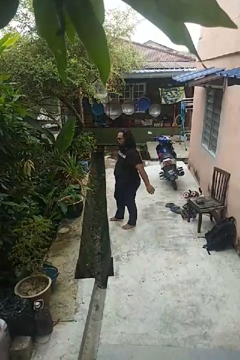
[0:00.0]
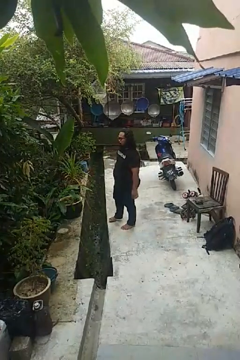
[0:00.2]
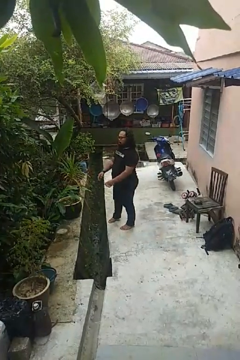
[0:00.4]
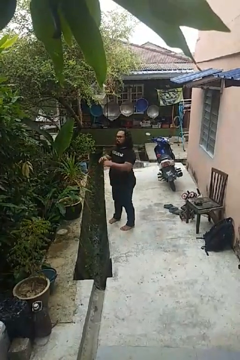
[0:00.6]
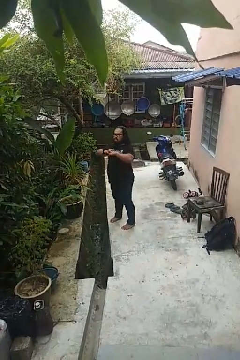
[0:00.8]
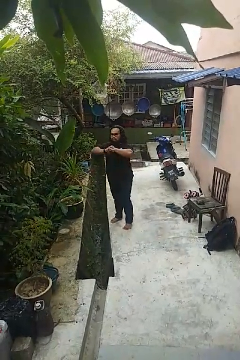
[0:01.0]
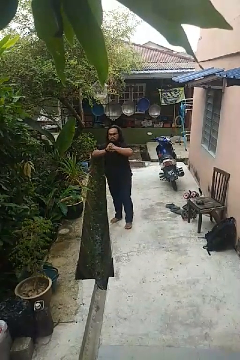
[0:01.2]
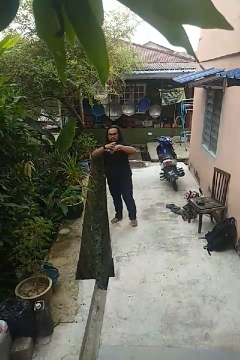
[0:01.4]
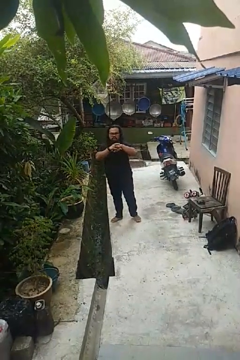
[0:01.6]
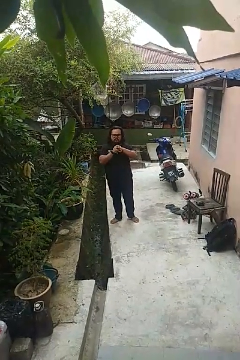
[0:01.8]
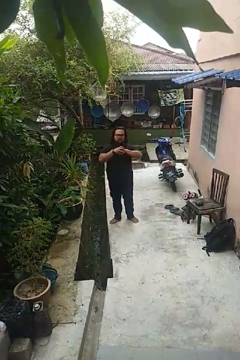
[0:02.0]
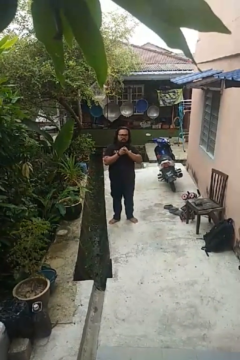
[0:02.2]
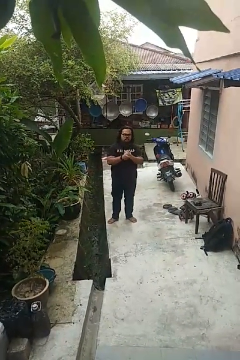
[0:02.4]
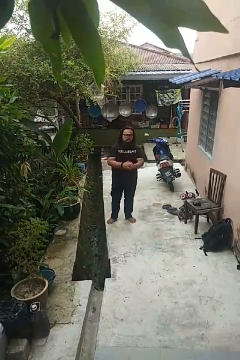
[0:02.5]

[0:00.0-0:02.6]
person cracks knuckles

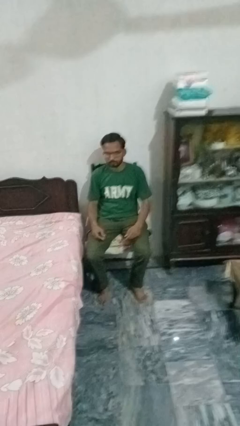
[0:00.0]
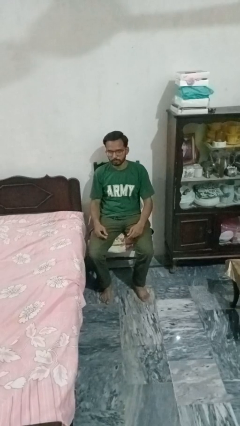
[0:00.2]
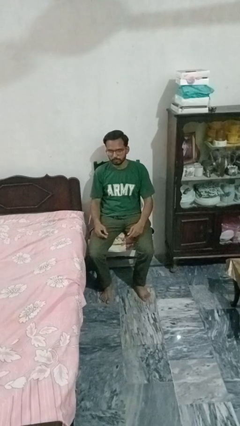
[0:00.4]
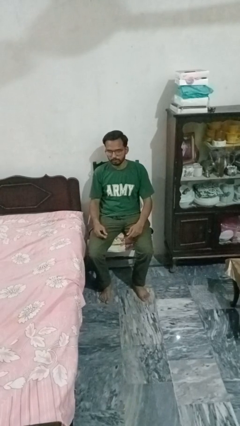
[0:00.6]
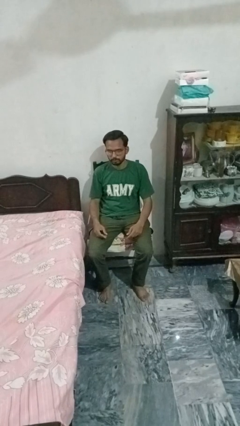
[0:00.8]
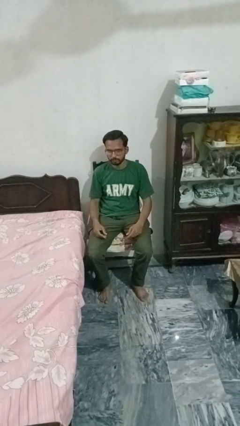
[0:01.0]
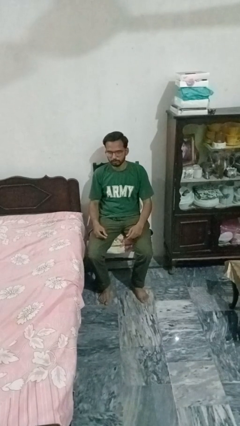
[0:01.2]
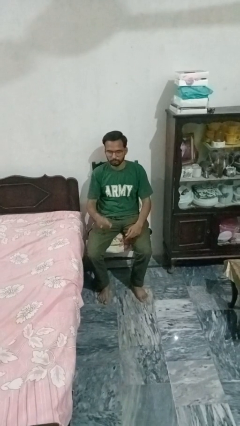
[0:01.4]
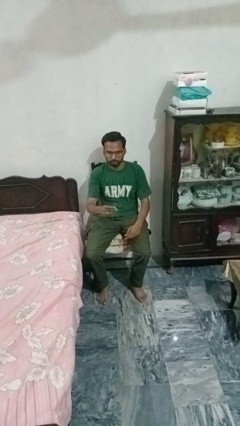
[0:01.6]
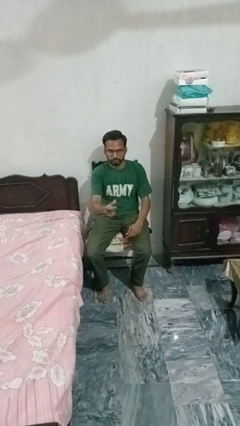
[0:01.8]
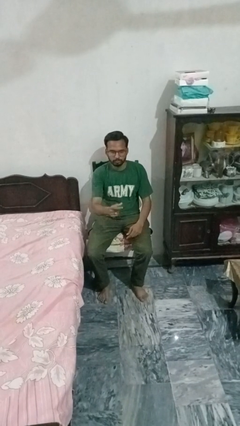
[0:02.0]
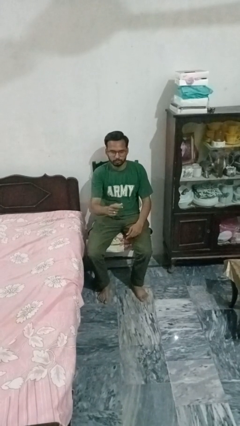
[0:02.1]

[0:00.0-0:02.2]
person snaps fingers

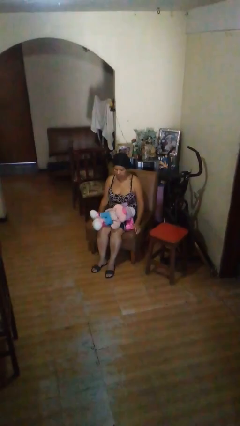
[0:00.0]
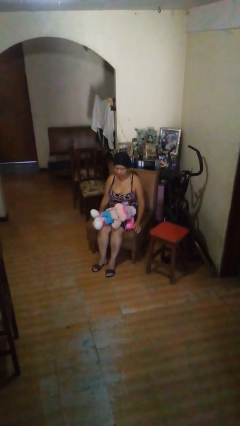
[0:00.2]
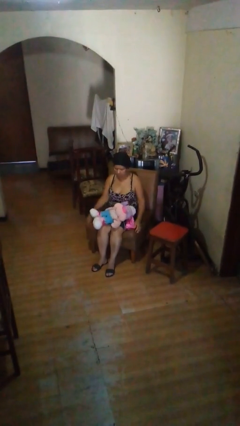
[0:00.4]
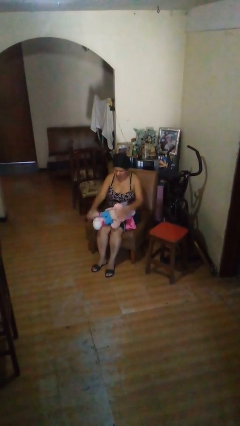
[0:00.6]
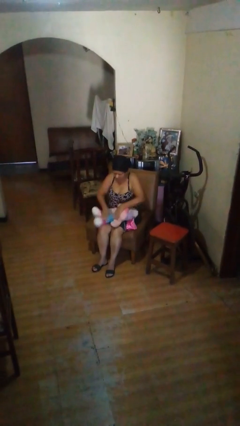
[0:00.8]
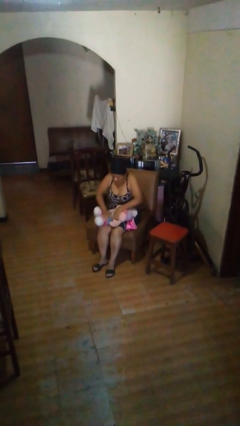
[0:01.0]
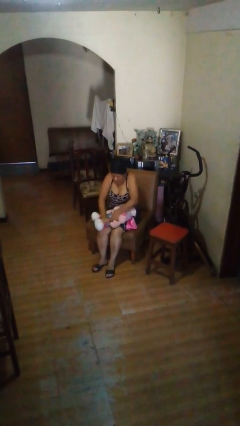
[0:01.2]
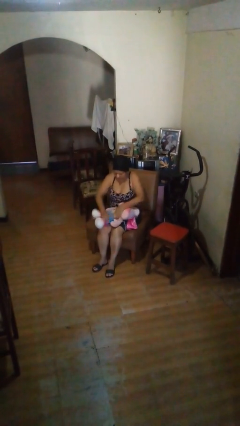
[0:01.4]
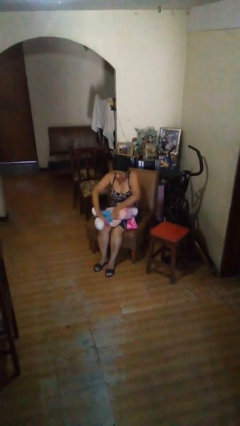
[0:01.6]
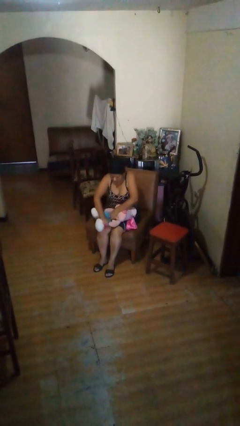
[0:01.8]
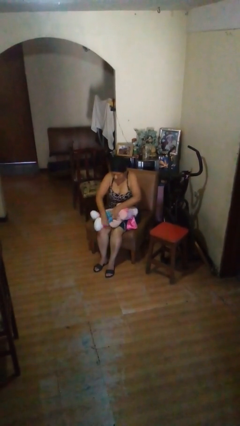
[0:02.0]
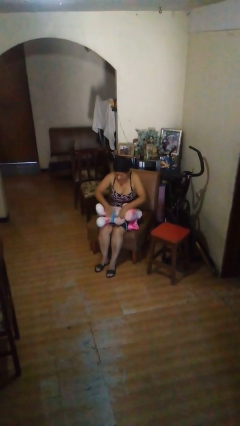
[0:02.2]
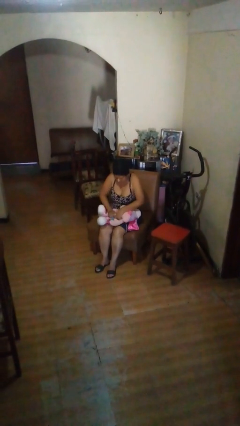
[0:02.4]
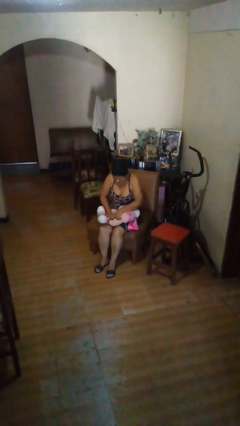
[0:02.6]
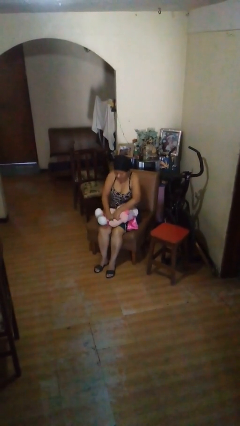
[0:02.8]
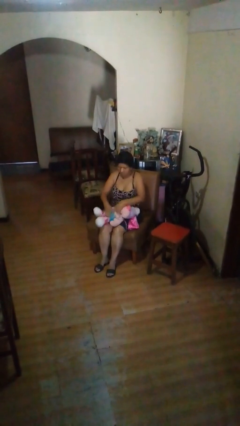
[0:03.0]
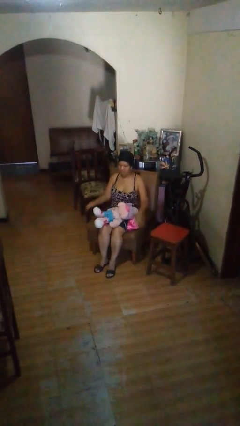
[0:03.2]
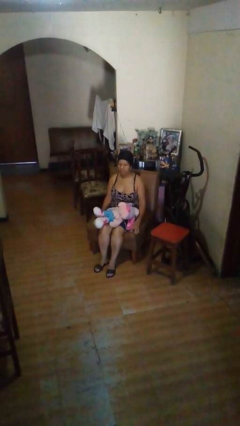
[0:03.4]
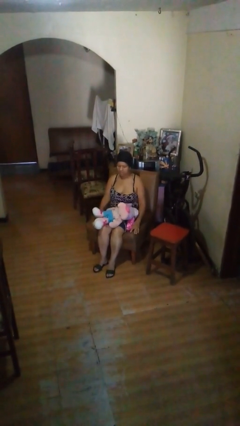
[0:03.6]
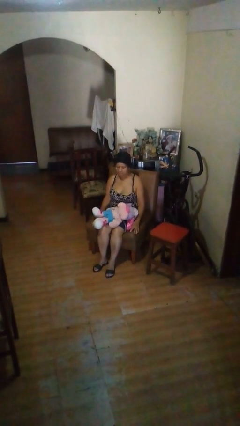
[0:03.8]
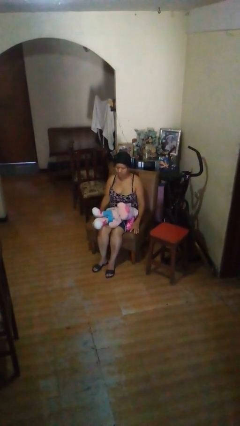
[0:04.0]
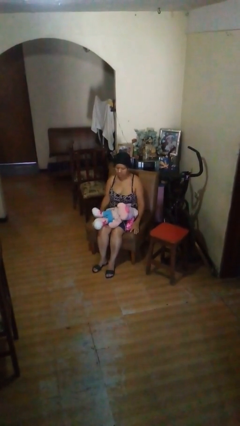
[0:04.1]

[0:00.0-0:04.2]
person squeezes object

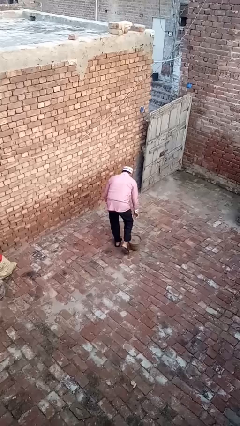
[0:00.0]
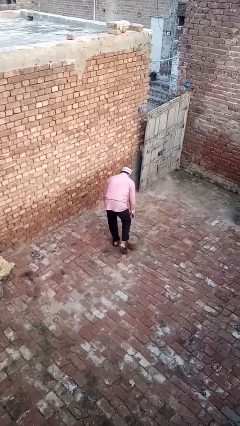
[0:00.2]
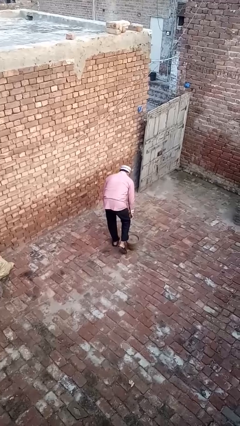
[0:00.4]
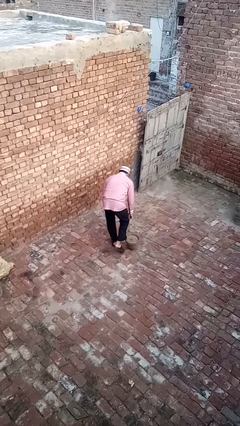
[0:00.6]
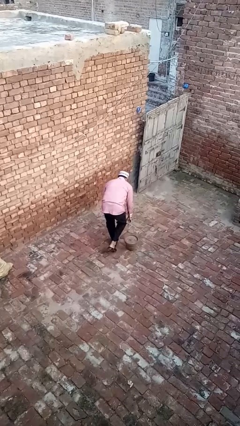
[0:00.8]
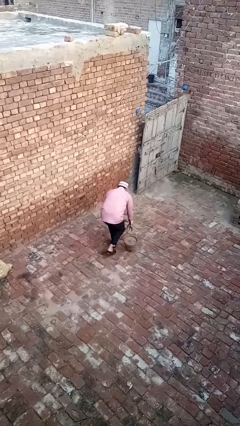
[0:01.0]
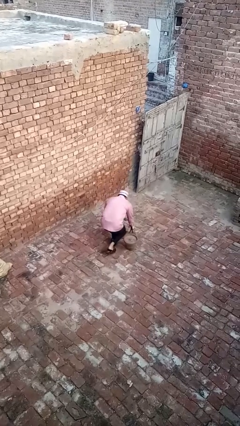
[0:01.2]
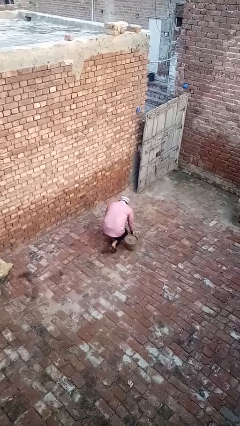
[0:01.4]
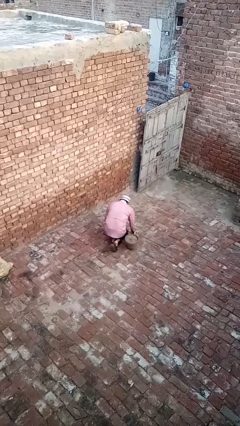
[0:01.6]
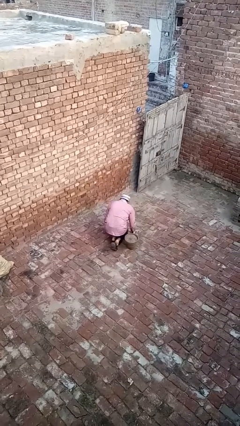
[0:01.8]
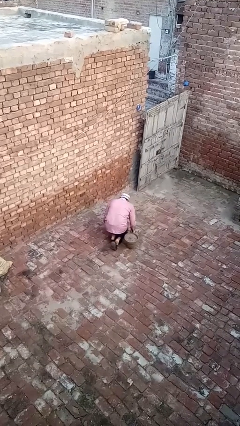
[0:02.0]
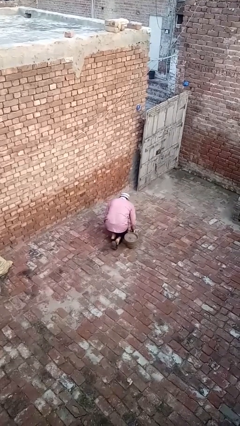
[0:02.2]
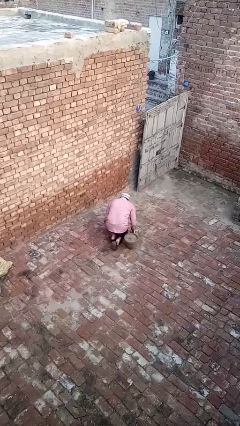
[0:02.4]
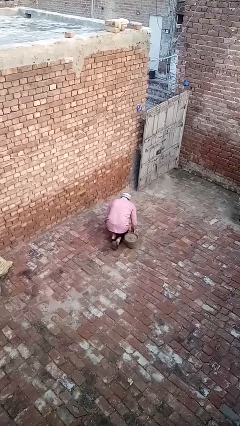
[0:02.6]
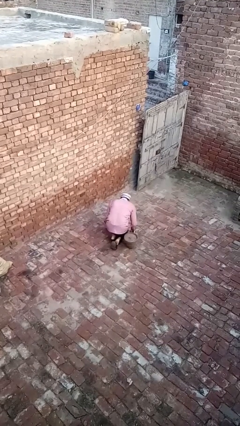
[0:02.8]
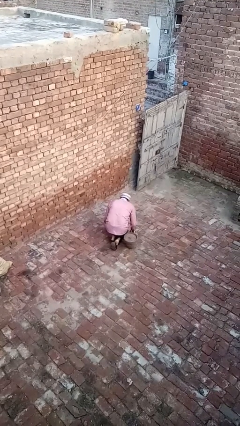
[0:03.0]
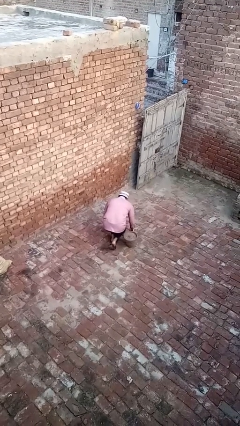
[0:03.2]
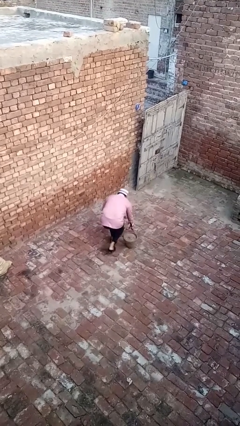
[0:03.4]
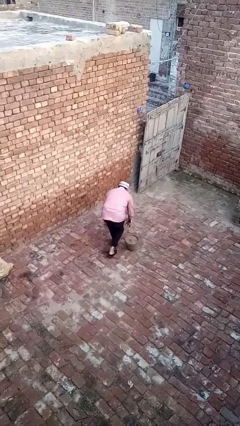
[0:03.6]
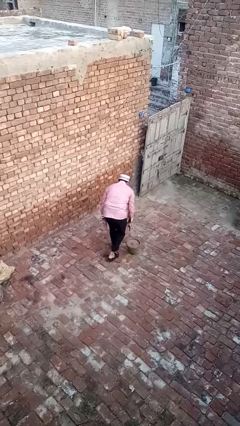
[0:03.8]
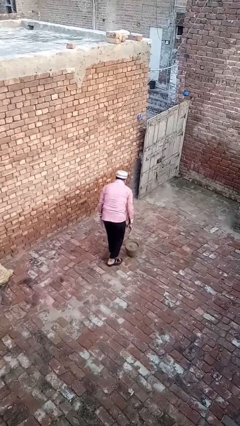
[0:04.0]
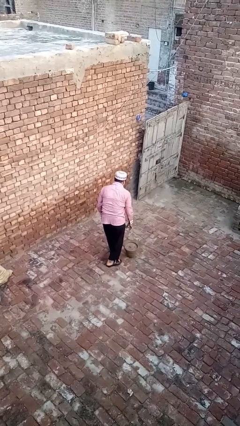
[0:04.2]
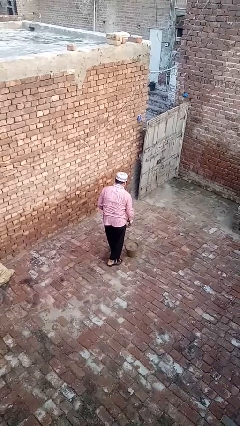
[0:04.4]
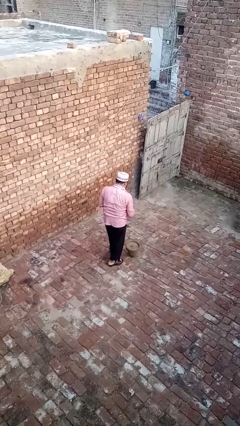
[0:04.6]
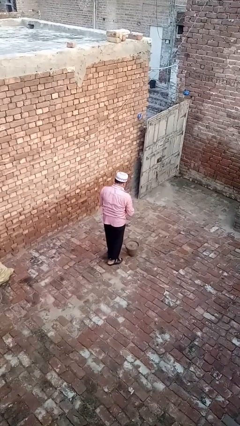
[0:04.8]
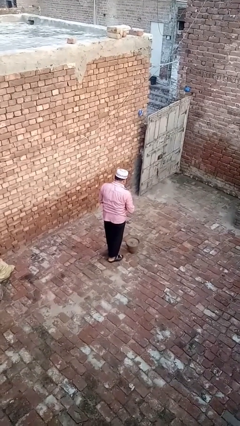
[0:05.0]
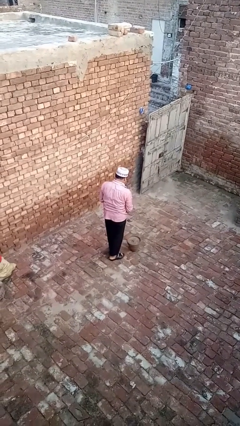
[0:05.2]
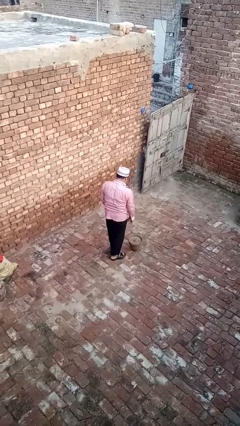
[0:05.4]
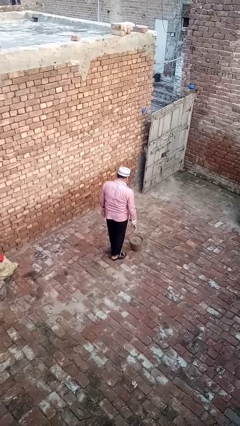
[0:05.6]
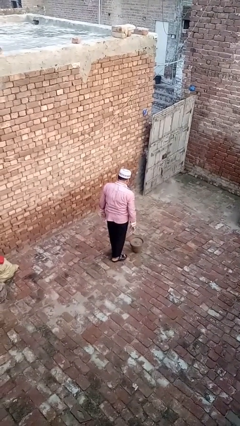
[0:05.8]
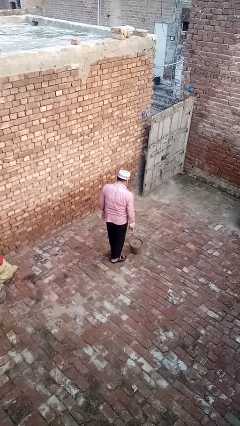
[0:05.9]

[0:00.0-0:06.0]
person lies down on floor

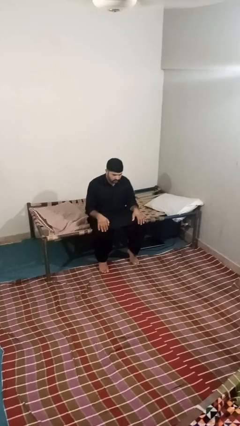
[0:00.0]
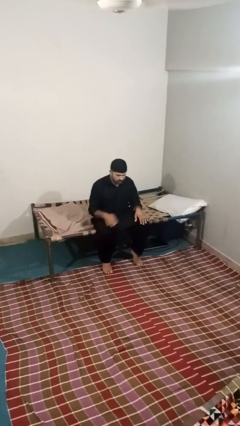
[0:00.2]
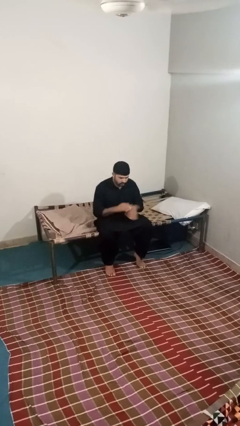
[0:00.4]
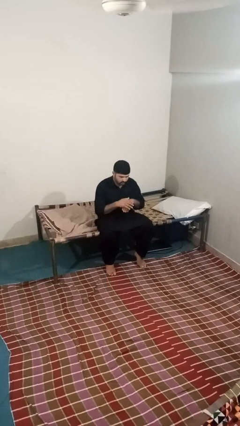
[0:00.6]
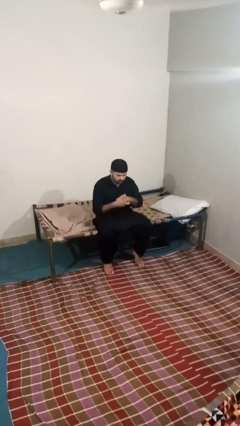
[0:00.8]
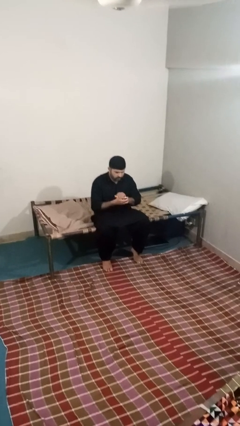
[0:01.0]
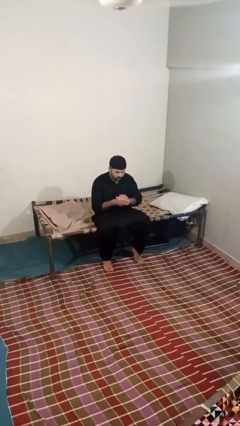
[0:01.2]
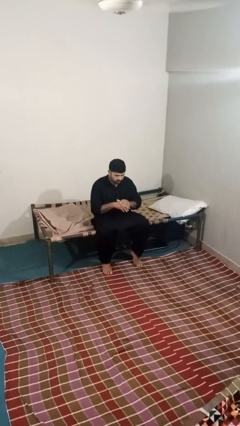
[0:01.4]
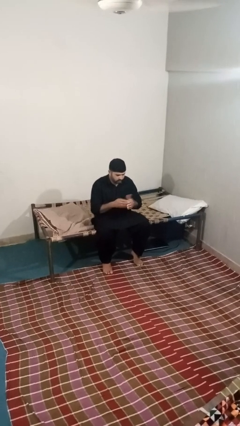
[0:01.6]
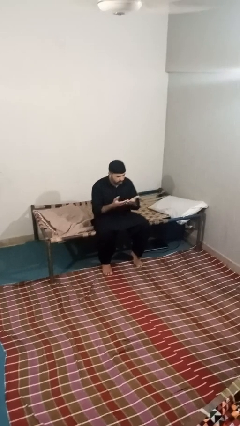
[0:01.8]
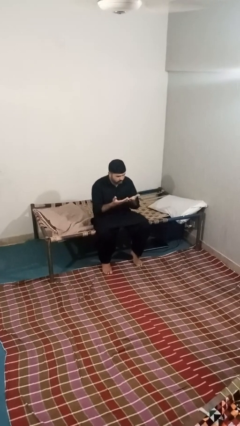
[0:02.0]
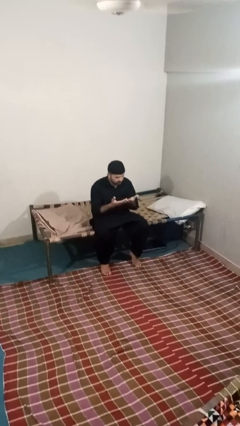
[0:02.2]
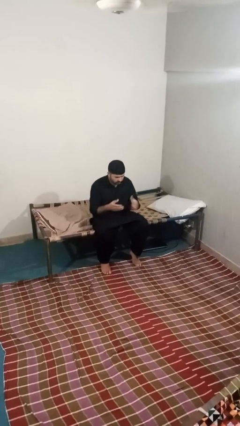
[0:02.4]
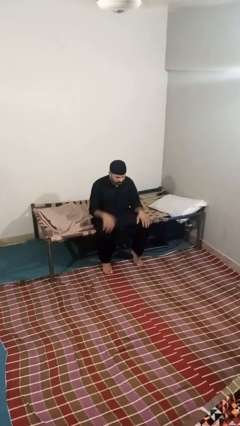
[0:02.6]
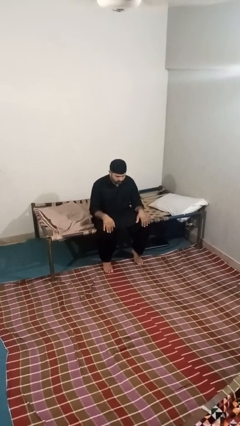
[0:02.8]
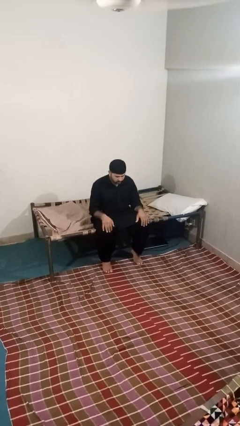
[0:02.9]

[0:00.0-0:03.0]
person looks at hands in lap
